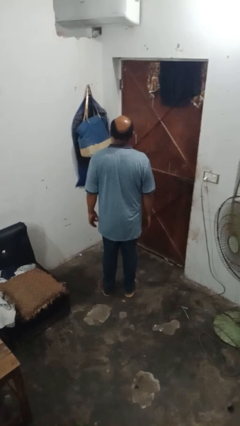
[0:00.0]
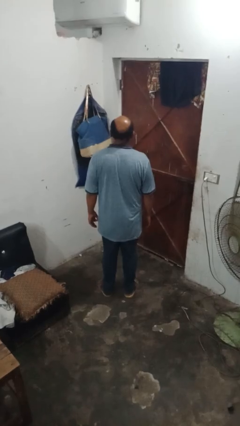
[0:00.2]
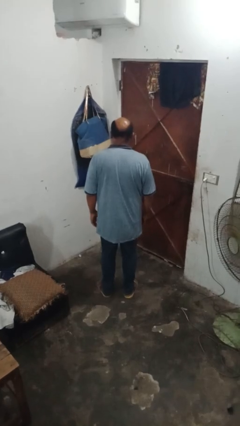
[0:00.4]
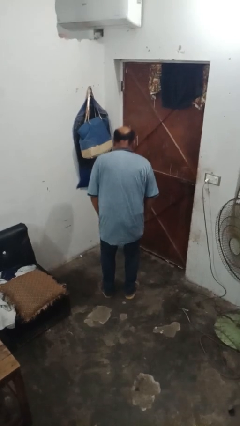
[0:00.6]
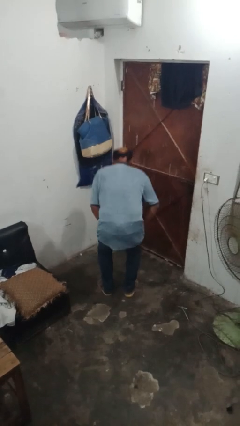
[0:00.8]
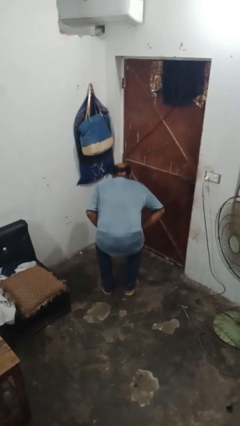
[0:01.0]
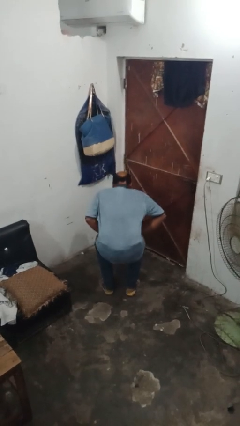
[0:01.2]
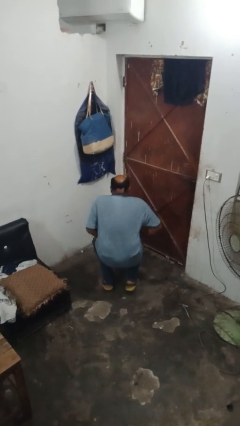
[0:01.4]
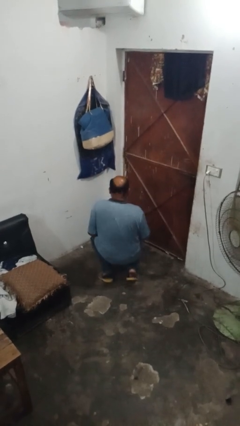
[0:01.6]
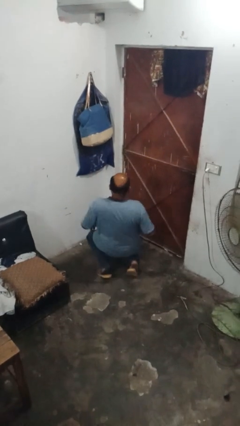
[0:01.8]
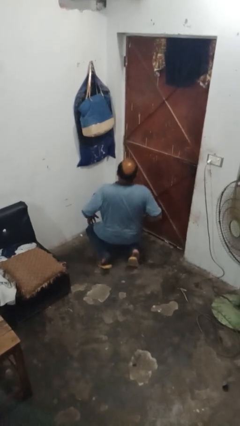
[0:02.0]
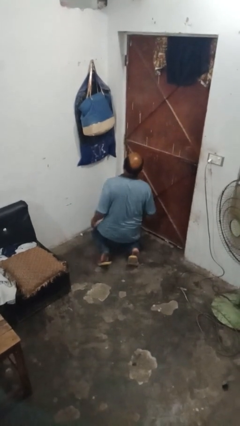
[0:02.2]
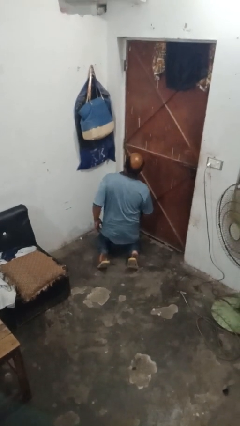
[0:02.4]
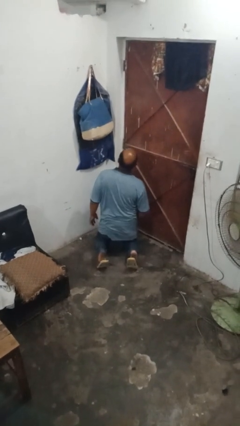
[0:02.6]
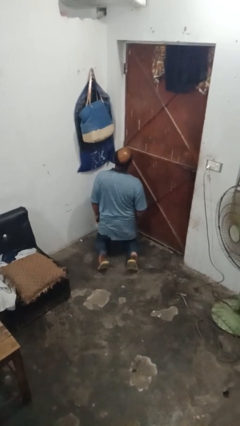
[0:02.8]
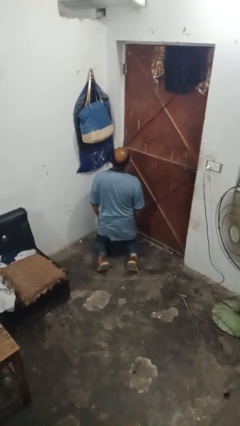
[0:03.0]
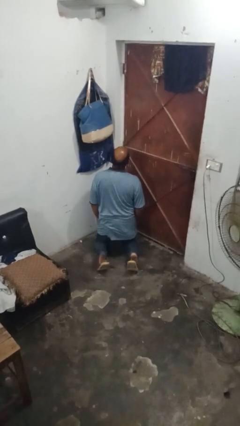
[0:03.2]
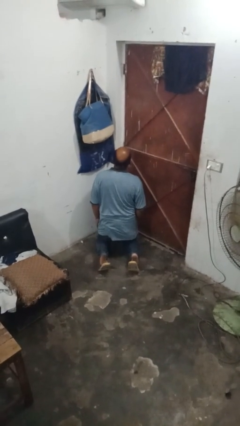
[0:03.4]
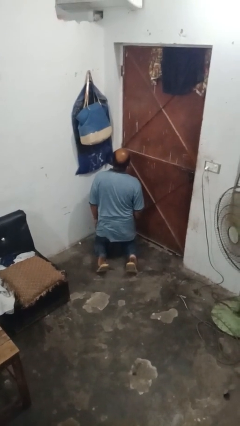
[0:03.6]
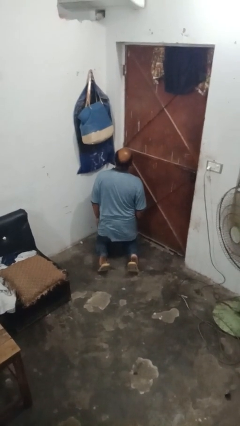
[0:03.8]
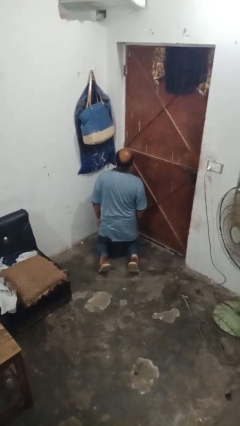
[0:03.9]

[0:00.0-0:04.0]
person squats

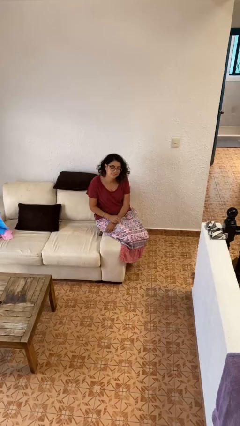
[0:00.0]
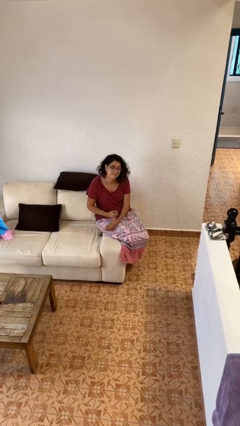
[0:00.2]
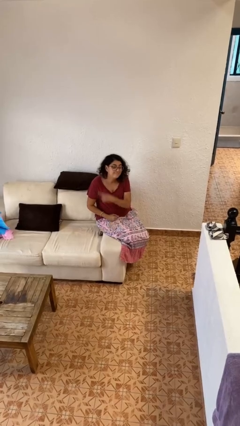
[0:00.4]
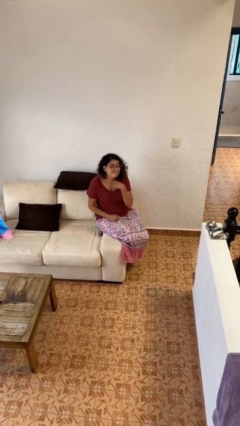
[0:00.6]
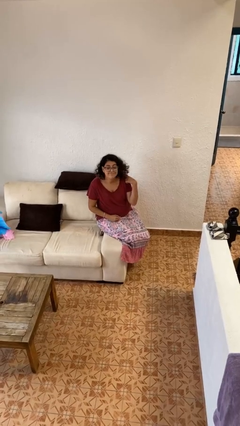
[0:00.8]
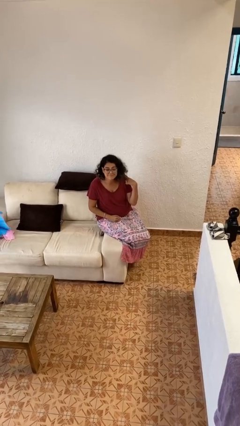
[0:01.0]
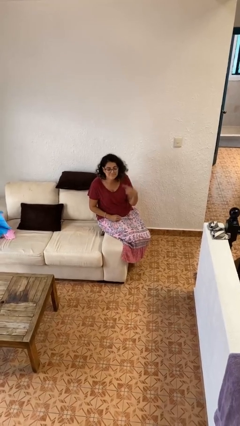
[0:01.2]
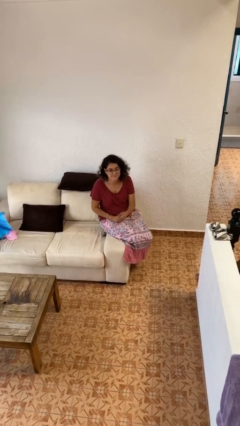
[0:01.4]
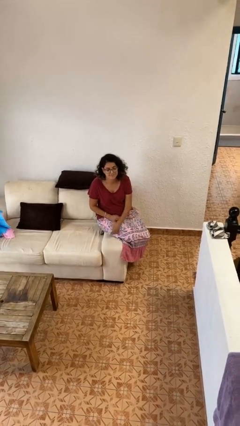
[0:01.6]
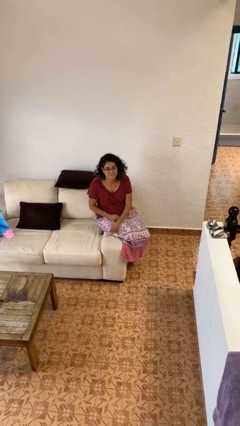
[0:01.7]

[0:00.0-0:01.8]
person gestures cut

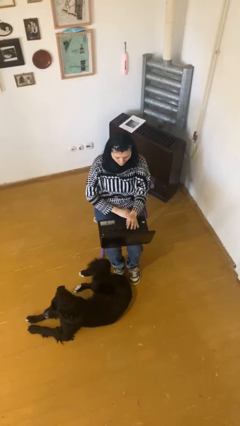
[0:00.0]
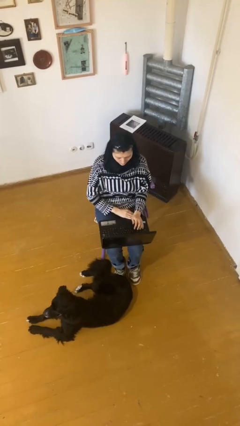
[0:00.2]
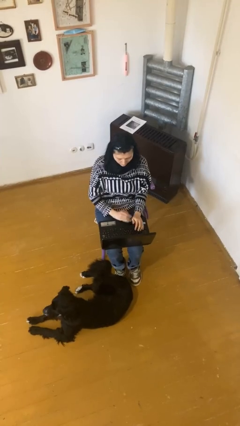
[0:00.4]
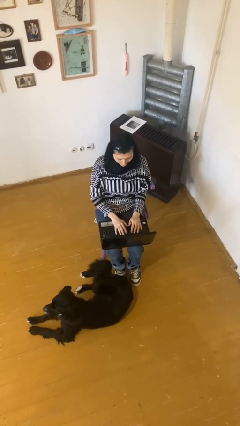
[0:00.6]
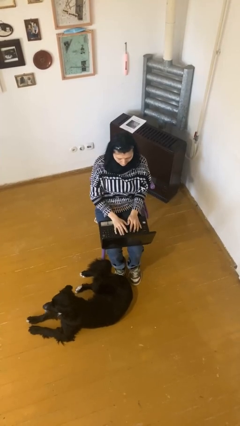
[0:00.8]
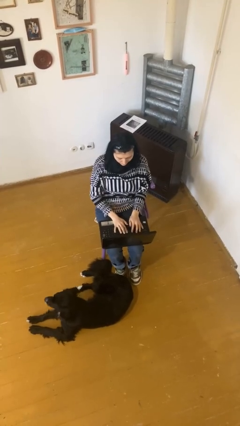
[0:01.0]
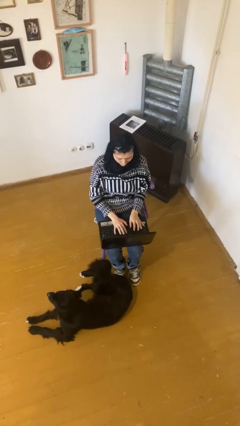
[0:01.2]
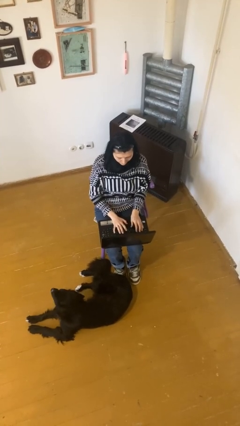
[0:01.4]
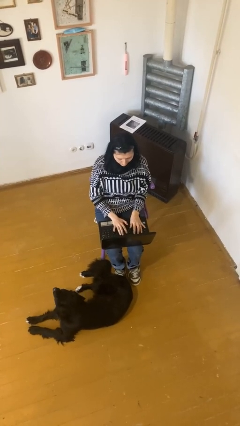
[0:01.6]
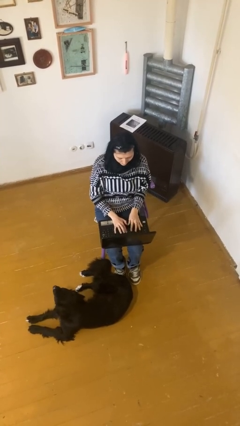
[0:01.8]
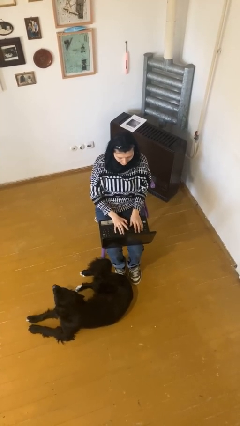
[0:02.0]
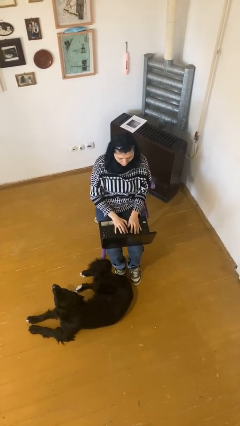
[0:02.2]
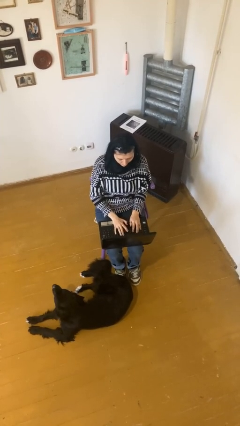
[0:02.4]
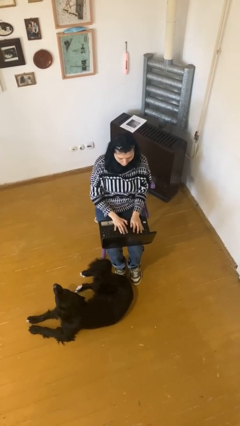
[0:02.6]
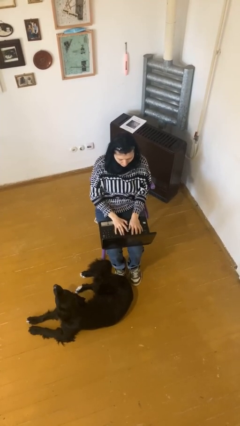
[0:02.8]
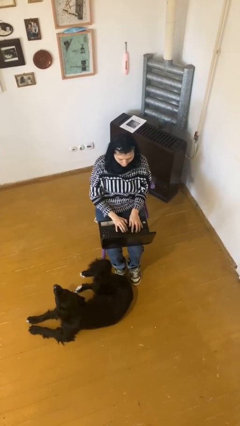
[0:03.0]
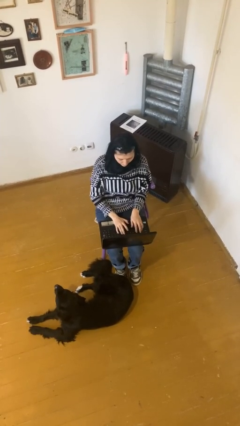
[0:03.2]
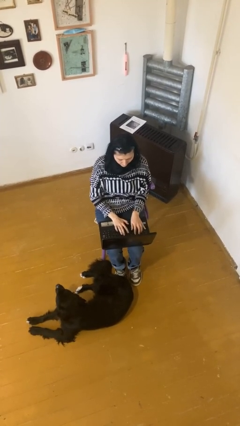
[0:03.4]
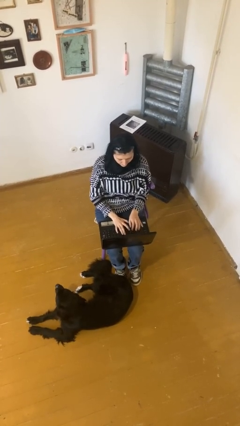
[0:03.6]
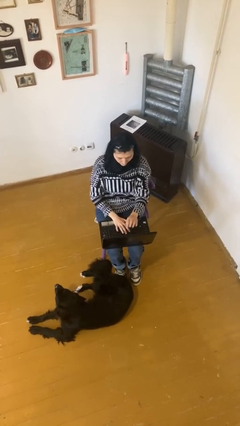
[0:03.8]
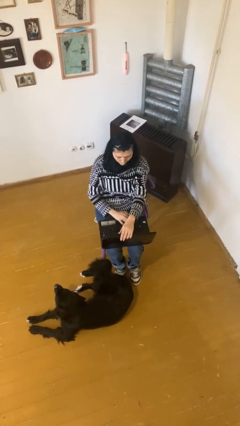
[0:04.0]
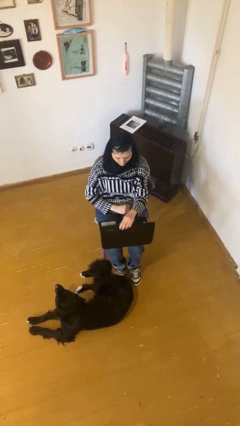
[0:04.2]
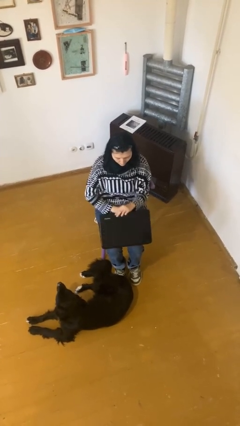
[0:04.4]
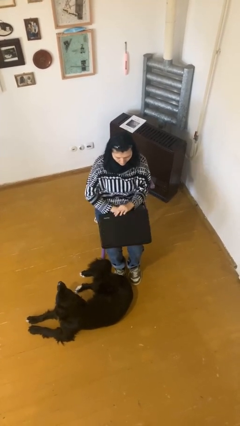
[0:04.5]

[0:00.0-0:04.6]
person interacts with laptop

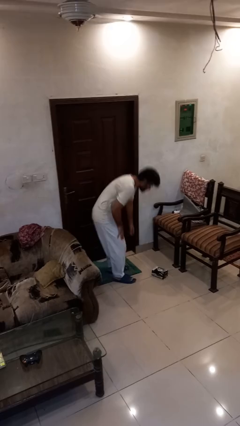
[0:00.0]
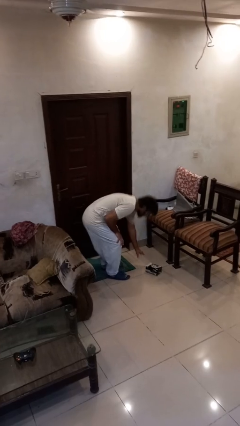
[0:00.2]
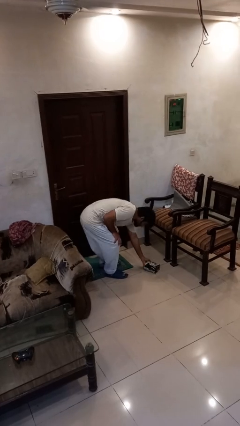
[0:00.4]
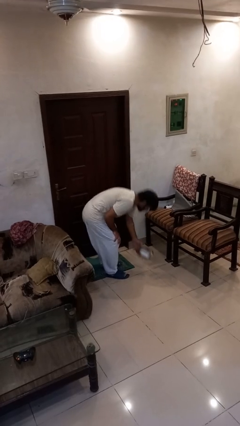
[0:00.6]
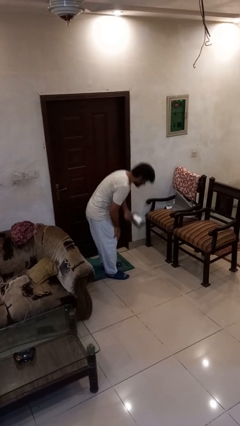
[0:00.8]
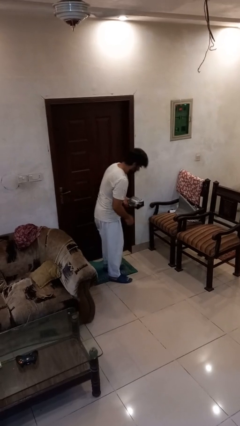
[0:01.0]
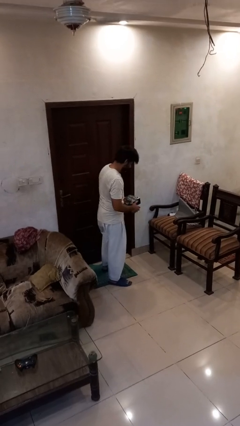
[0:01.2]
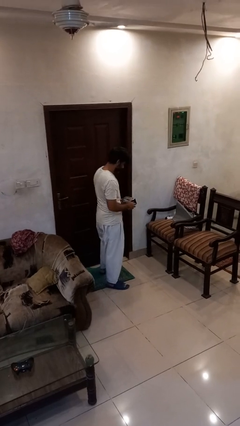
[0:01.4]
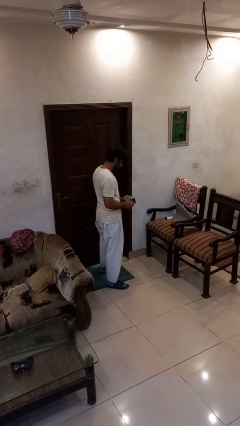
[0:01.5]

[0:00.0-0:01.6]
person picks up object from floor

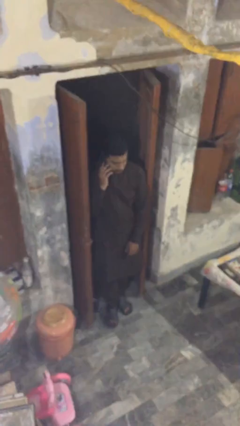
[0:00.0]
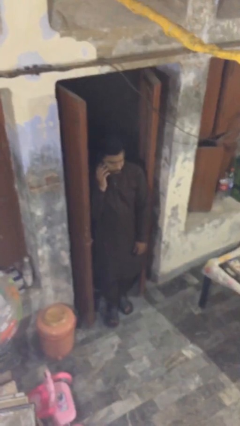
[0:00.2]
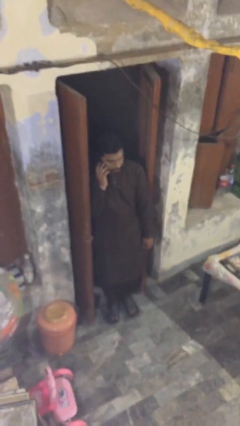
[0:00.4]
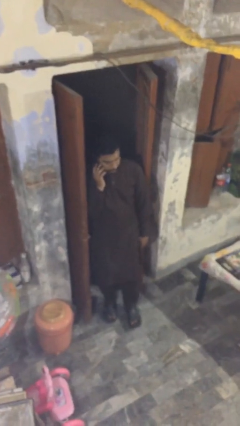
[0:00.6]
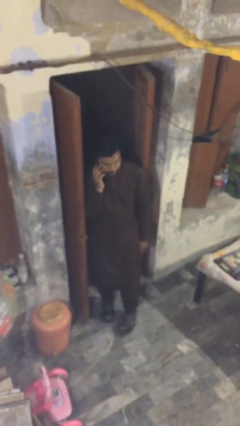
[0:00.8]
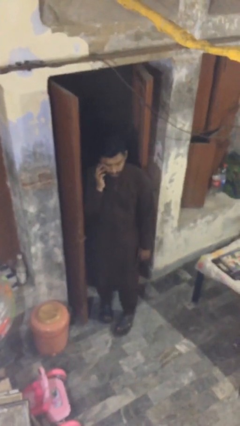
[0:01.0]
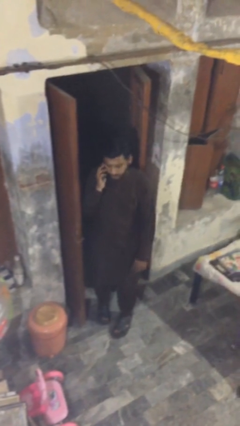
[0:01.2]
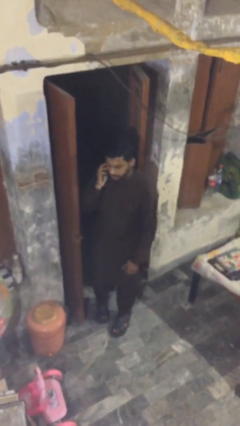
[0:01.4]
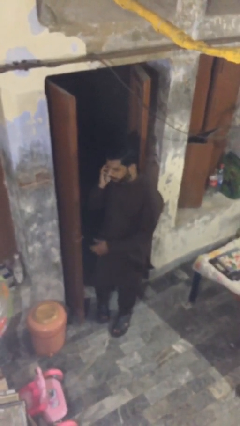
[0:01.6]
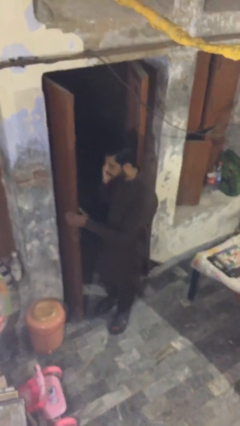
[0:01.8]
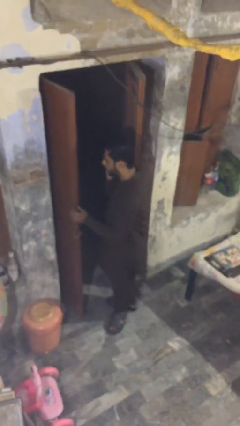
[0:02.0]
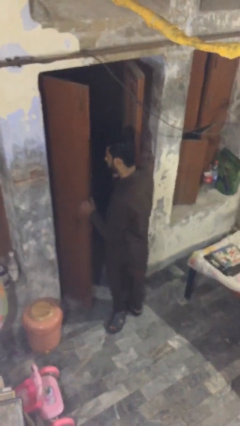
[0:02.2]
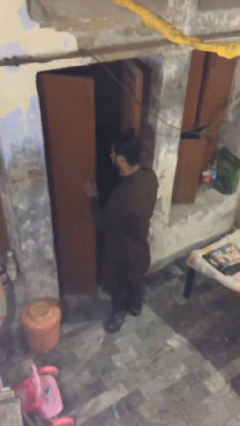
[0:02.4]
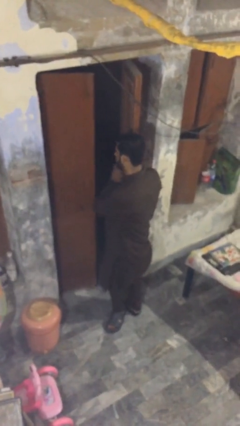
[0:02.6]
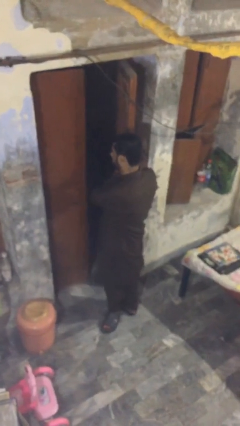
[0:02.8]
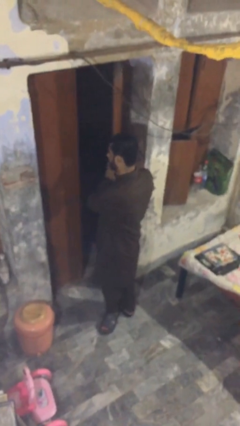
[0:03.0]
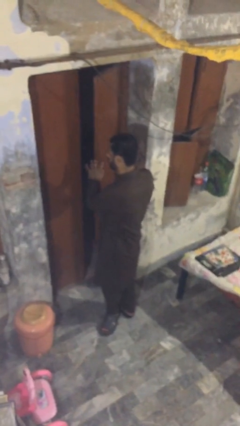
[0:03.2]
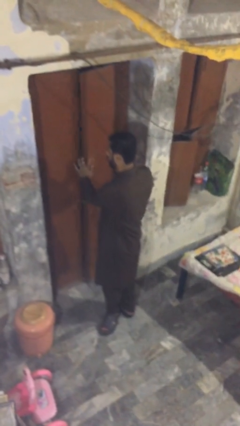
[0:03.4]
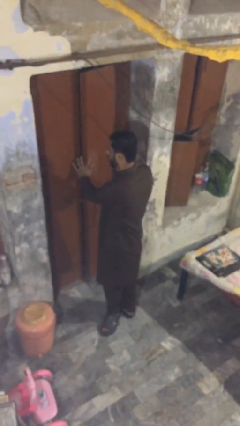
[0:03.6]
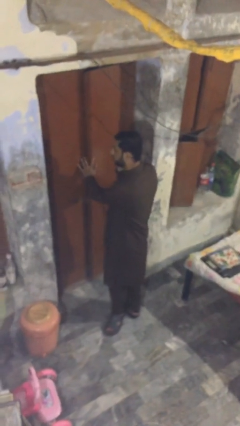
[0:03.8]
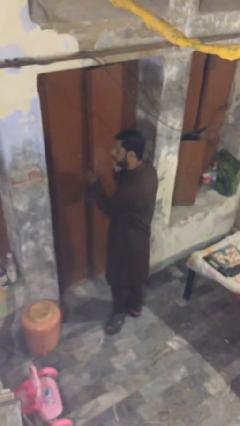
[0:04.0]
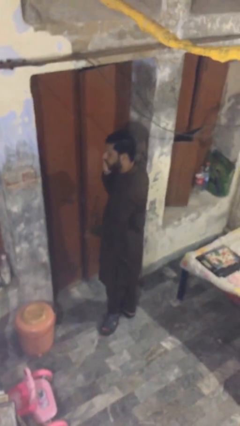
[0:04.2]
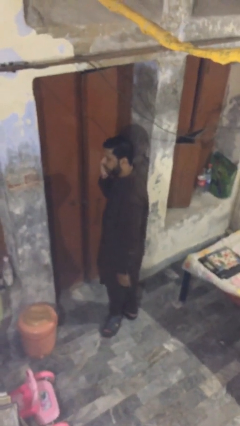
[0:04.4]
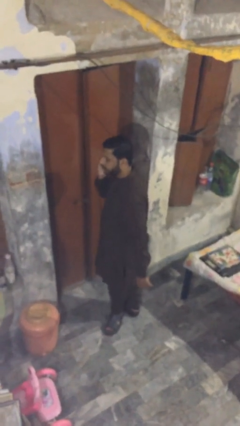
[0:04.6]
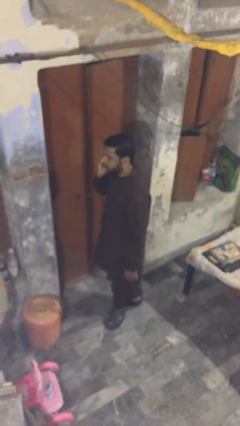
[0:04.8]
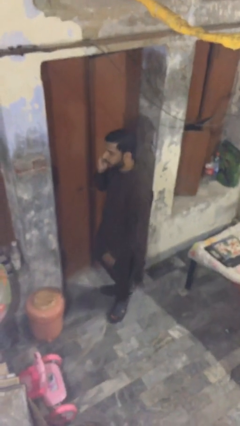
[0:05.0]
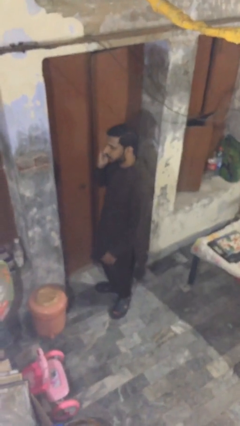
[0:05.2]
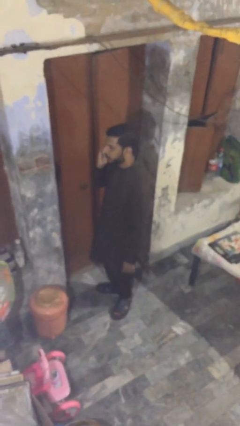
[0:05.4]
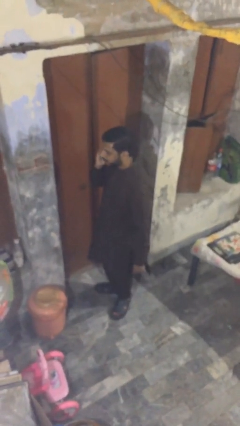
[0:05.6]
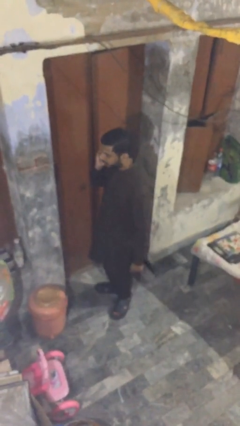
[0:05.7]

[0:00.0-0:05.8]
person closes facility door
